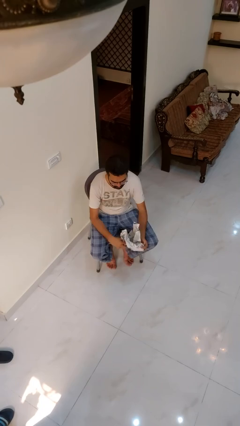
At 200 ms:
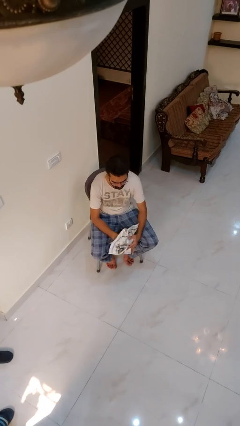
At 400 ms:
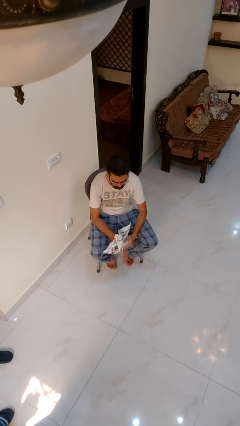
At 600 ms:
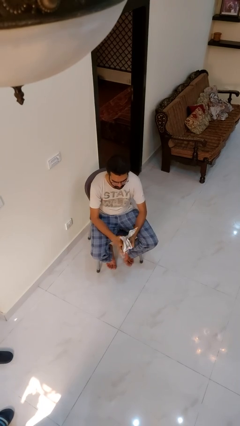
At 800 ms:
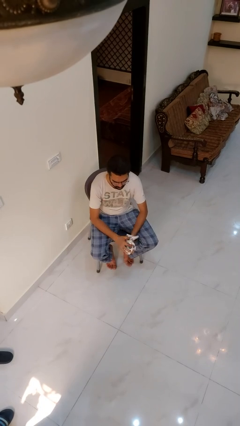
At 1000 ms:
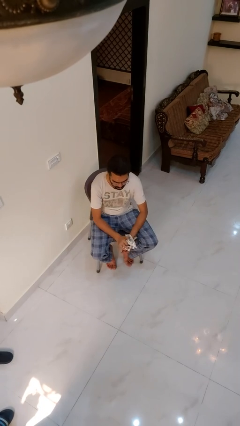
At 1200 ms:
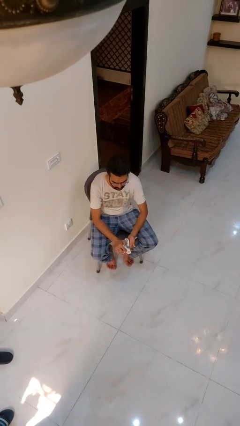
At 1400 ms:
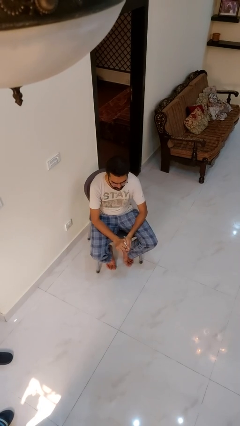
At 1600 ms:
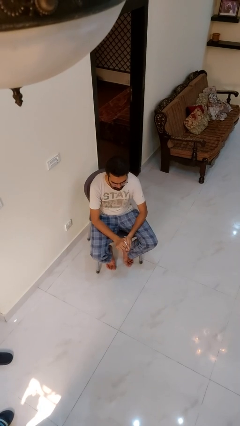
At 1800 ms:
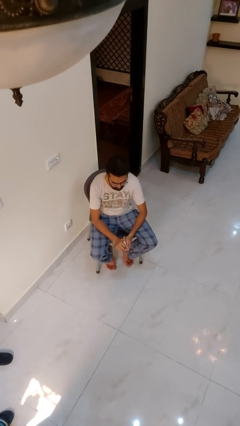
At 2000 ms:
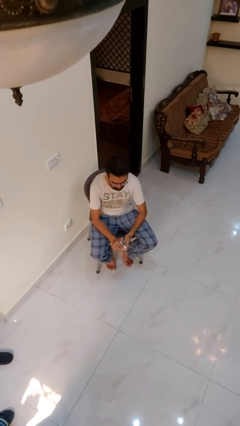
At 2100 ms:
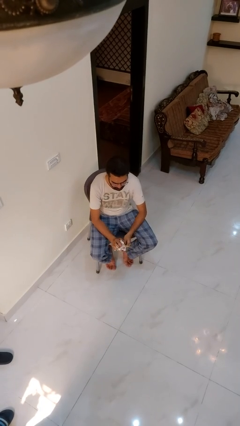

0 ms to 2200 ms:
person crumples paper

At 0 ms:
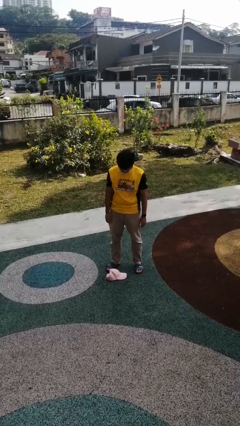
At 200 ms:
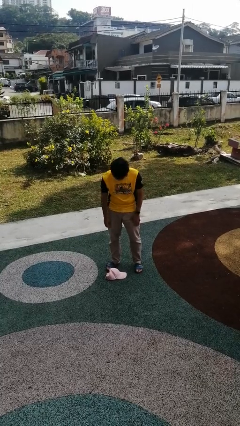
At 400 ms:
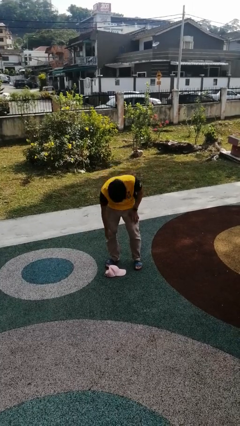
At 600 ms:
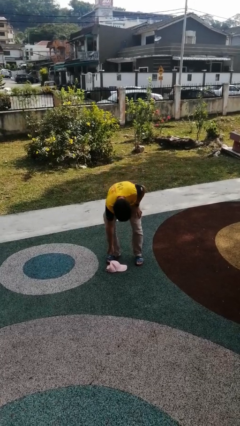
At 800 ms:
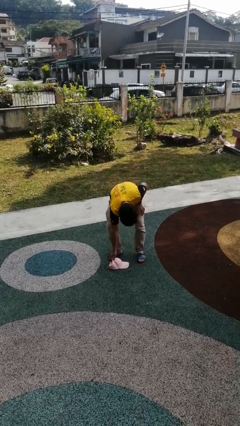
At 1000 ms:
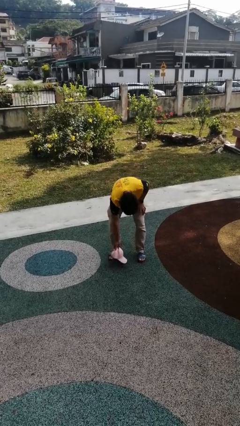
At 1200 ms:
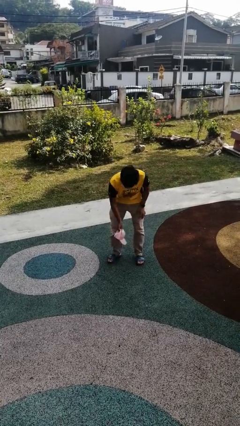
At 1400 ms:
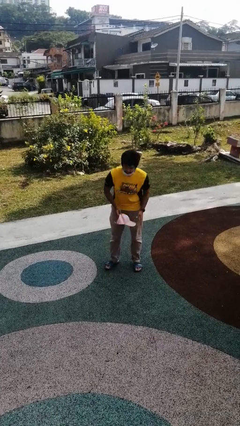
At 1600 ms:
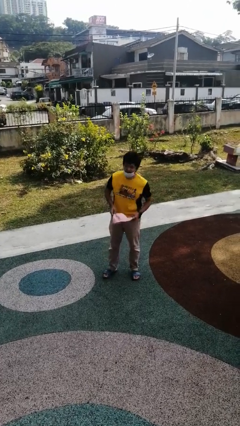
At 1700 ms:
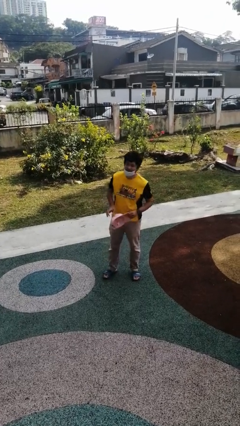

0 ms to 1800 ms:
person picks up object from floor

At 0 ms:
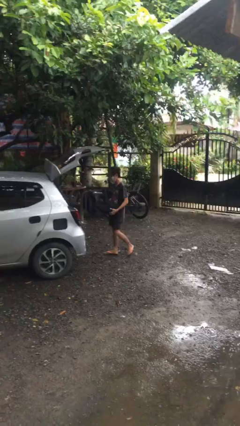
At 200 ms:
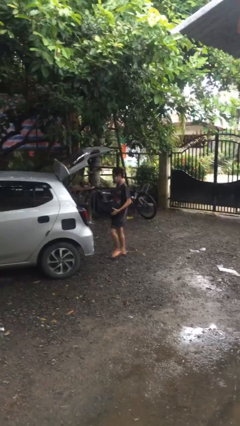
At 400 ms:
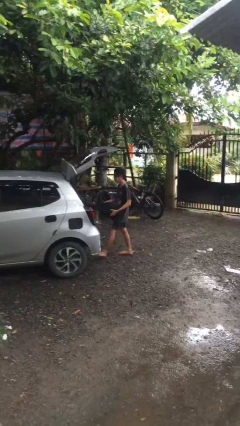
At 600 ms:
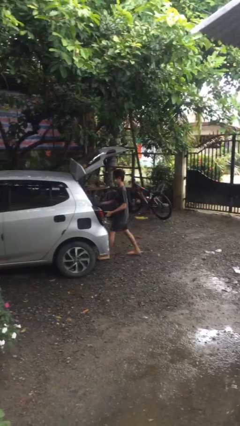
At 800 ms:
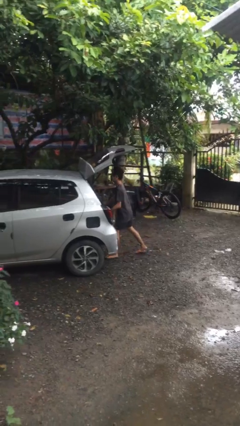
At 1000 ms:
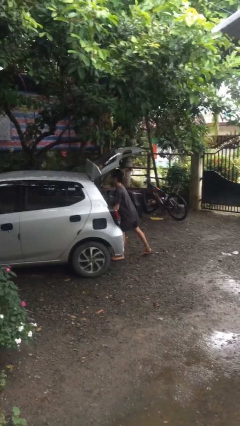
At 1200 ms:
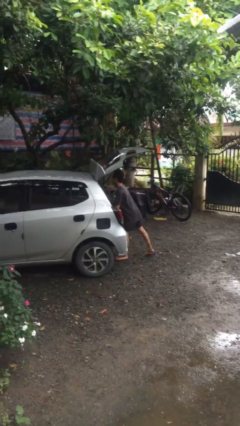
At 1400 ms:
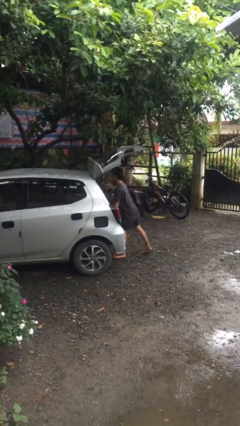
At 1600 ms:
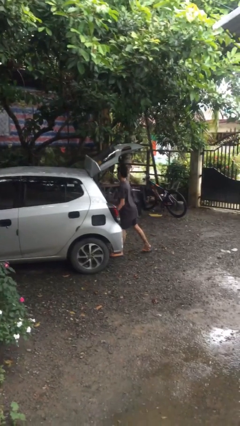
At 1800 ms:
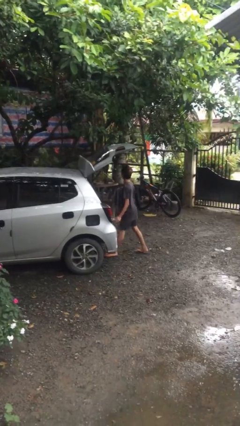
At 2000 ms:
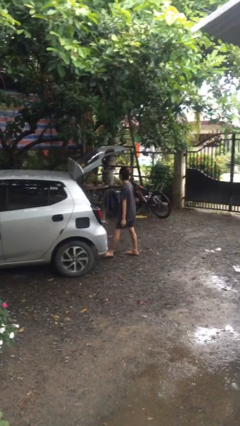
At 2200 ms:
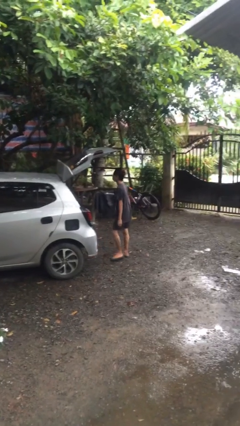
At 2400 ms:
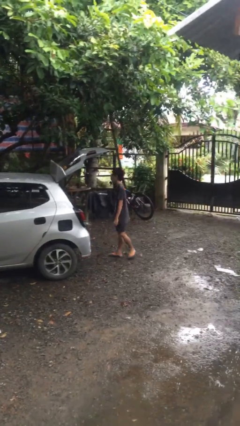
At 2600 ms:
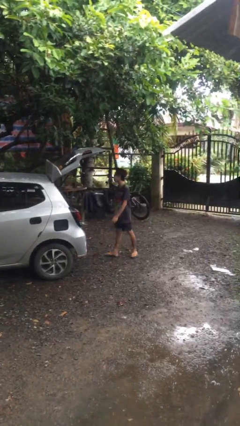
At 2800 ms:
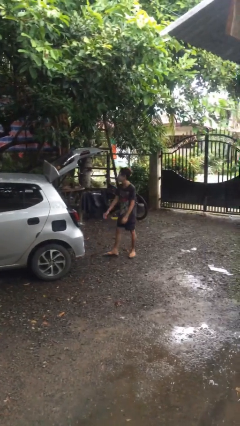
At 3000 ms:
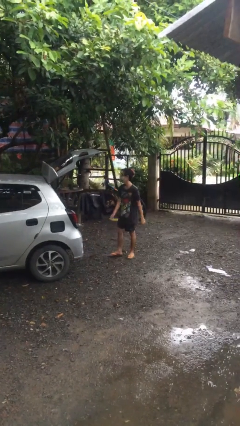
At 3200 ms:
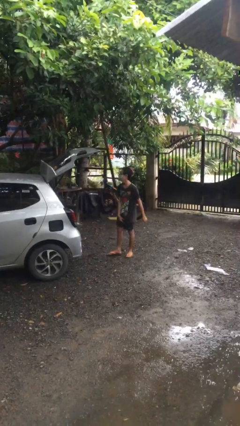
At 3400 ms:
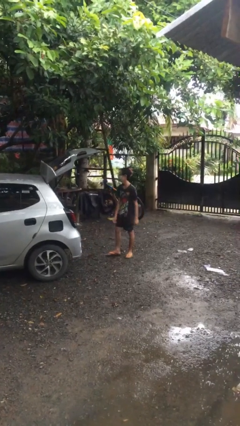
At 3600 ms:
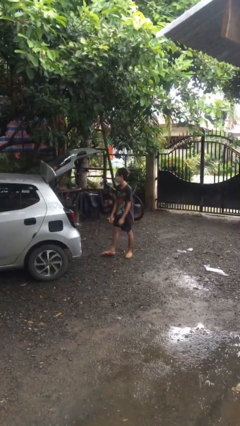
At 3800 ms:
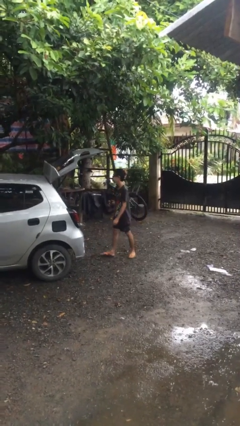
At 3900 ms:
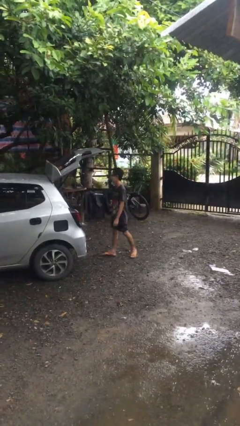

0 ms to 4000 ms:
person loads car

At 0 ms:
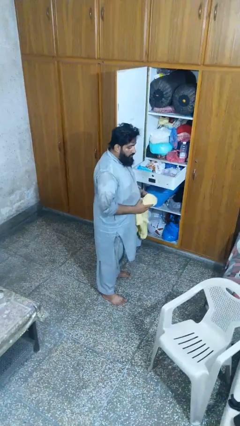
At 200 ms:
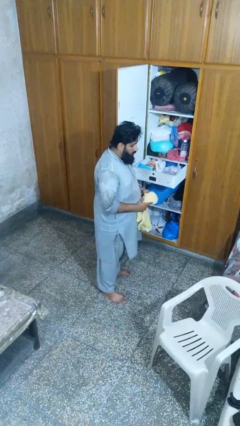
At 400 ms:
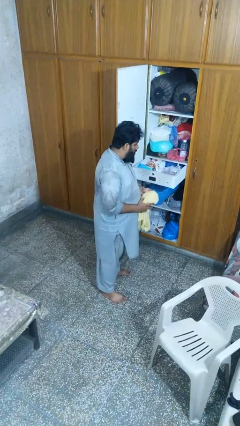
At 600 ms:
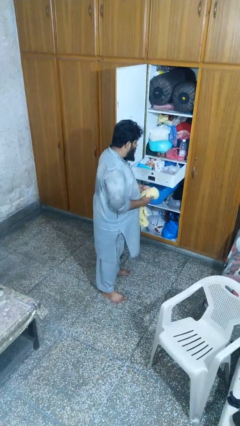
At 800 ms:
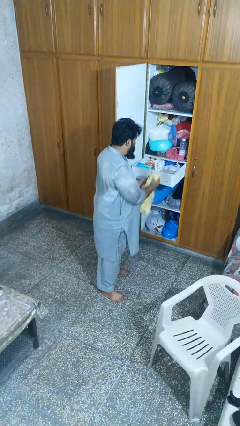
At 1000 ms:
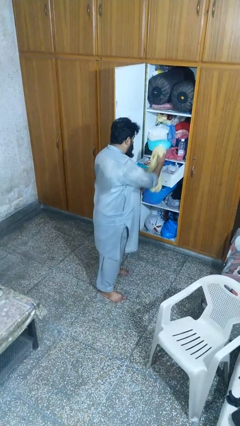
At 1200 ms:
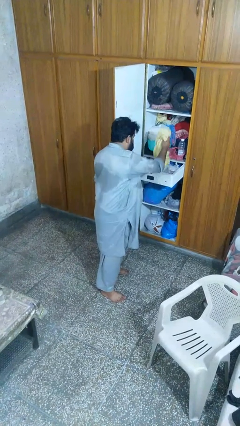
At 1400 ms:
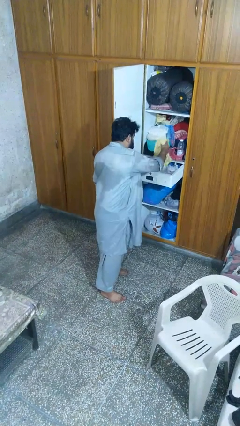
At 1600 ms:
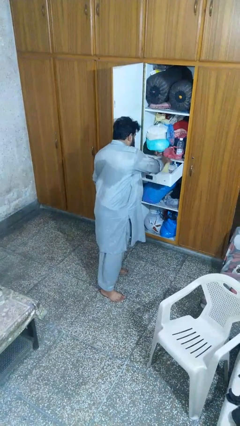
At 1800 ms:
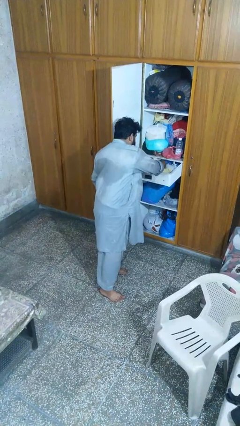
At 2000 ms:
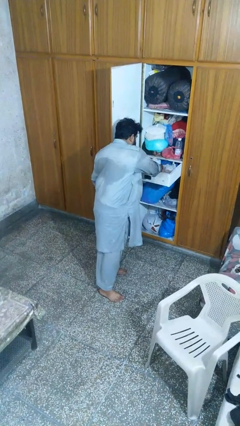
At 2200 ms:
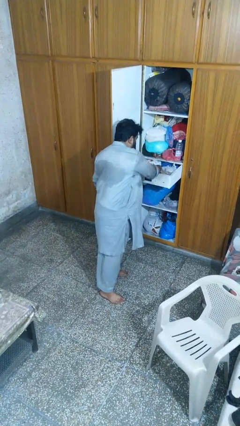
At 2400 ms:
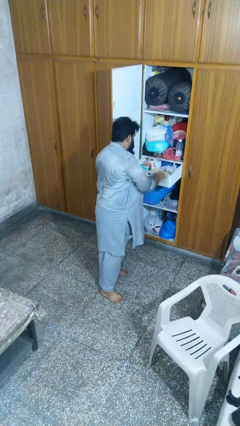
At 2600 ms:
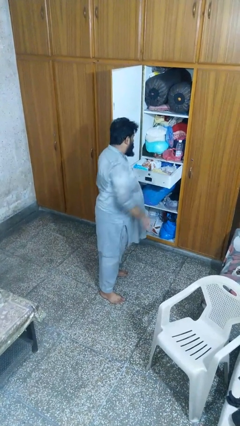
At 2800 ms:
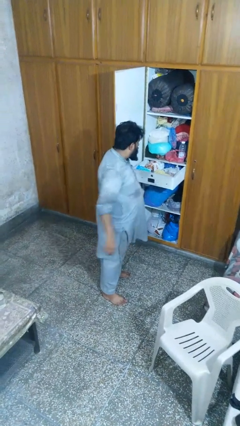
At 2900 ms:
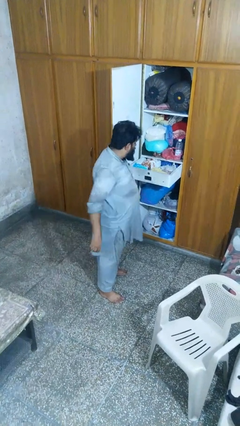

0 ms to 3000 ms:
person puts clothes into dresser

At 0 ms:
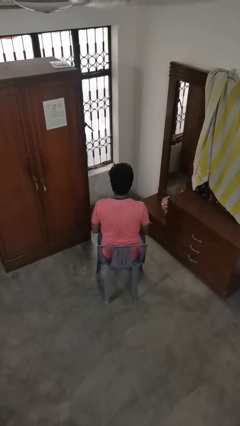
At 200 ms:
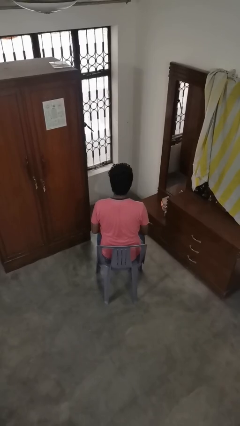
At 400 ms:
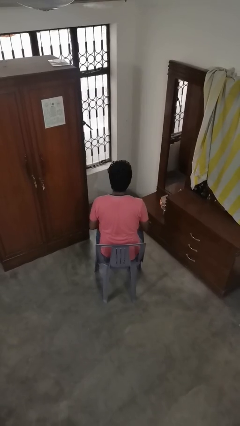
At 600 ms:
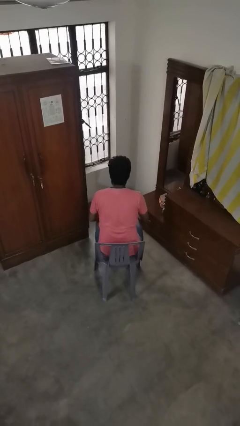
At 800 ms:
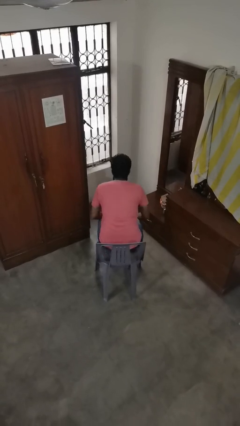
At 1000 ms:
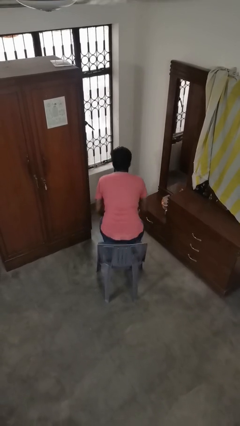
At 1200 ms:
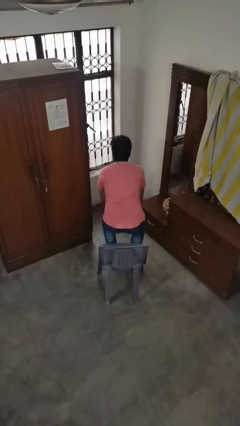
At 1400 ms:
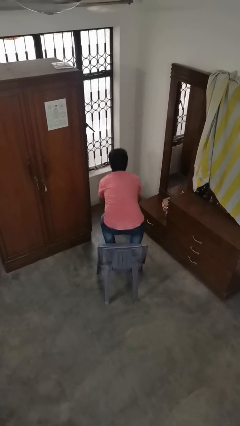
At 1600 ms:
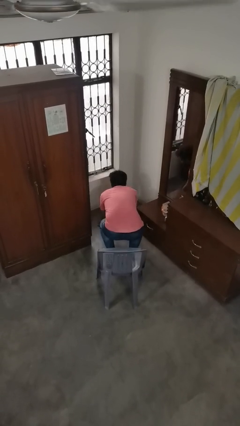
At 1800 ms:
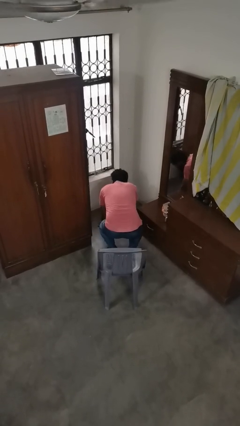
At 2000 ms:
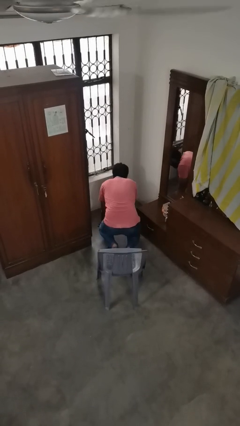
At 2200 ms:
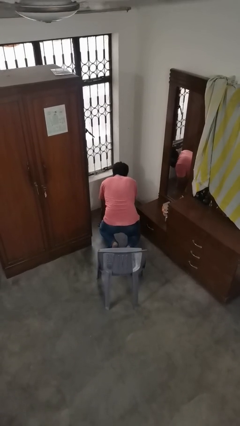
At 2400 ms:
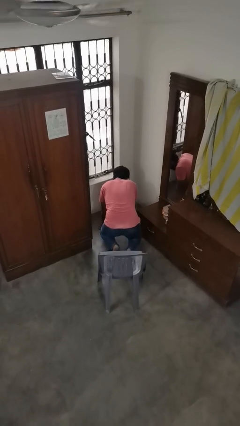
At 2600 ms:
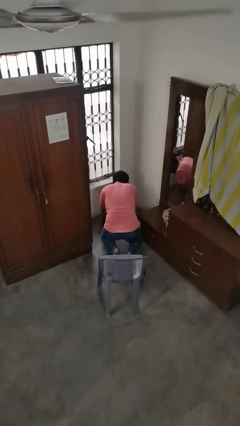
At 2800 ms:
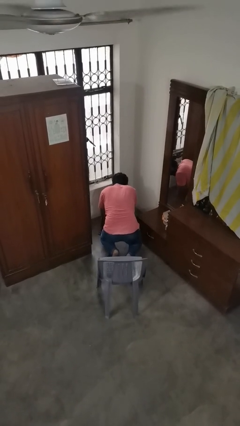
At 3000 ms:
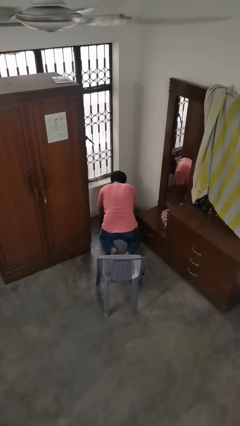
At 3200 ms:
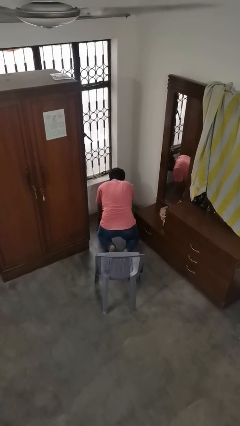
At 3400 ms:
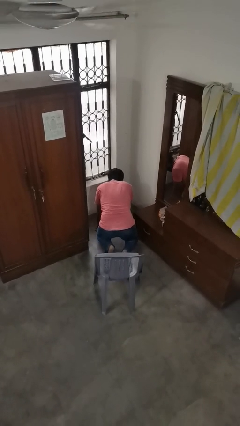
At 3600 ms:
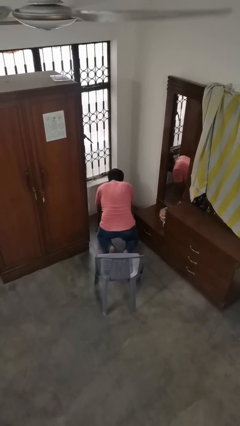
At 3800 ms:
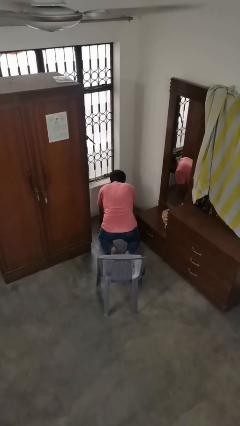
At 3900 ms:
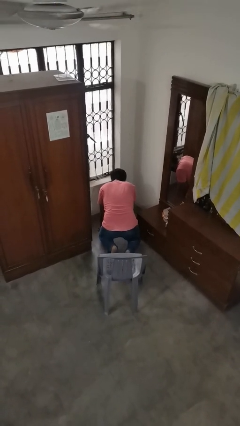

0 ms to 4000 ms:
person falls from chair

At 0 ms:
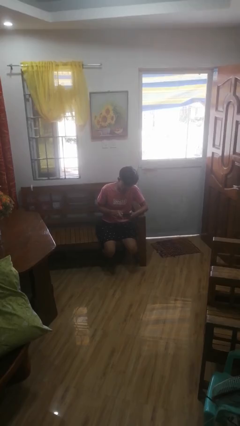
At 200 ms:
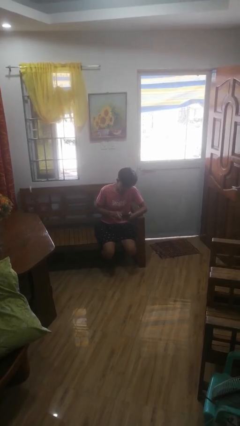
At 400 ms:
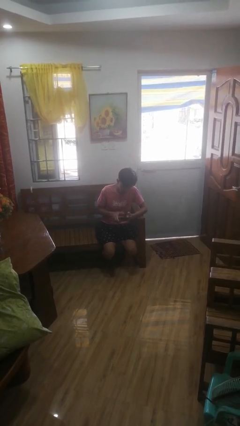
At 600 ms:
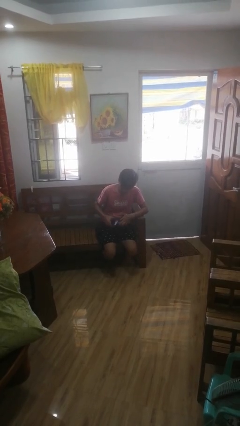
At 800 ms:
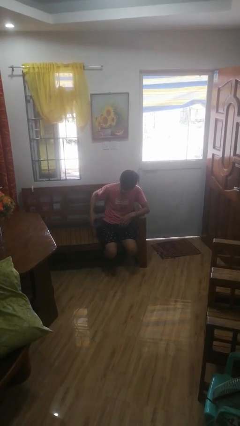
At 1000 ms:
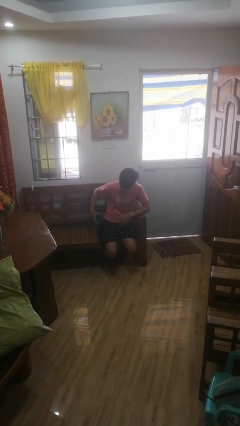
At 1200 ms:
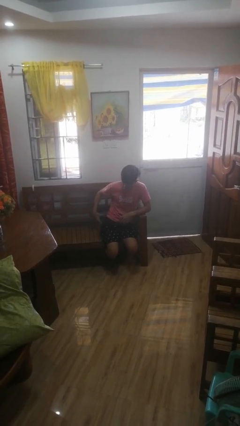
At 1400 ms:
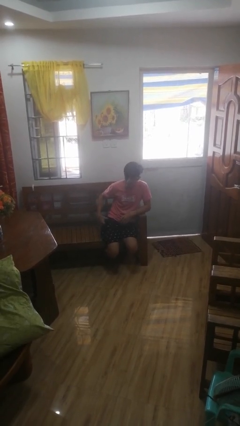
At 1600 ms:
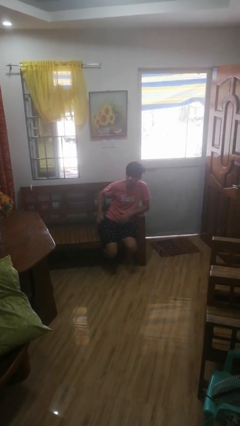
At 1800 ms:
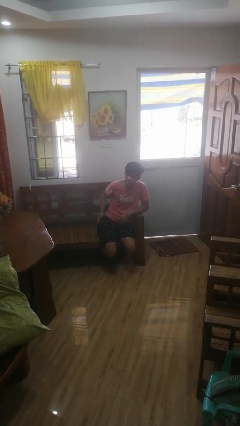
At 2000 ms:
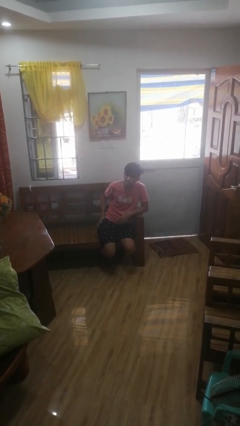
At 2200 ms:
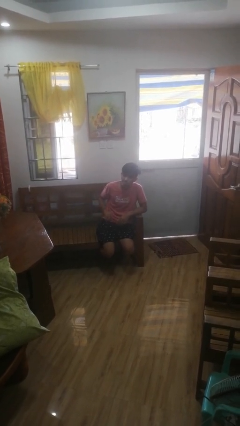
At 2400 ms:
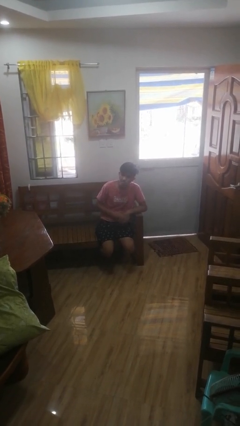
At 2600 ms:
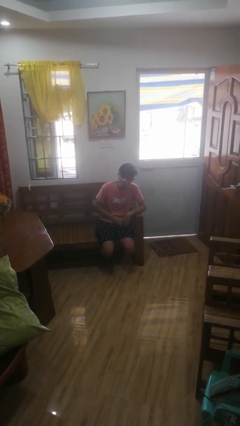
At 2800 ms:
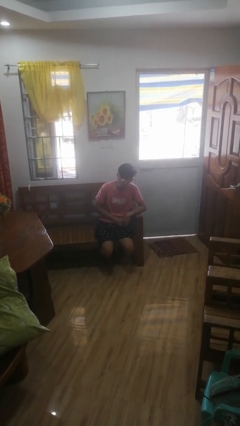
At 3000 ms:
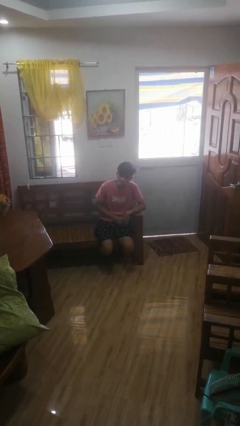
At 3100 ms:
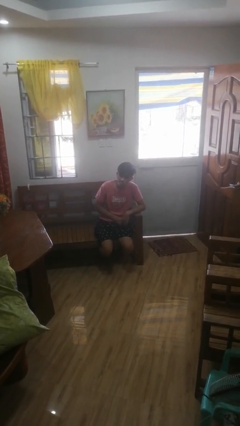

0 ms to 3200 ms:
person puts phone into pocket
